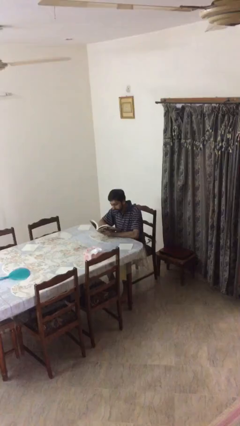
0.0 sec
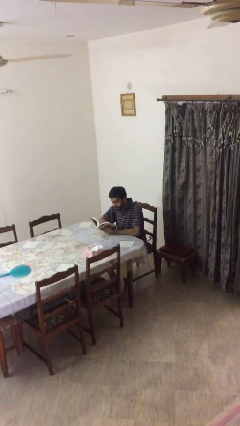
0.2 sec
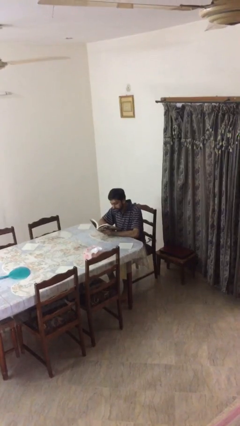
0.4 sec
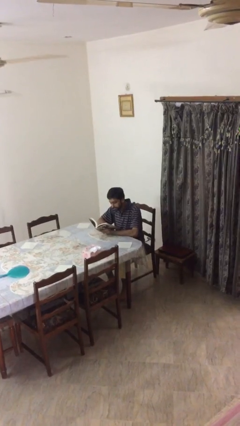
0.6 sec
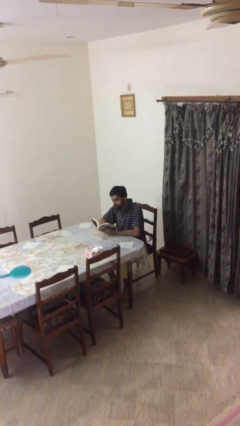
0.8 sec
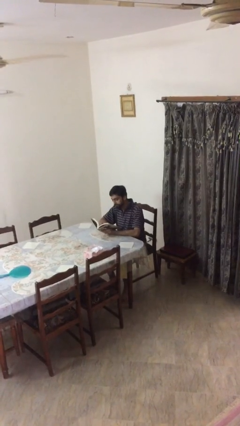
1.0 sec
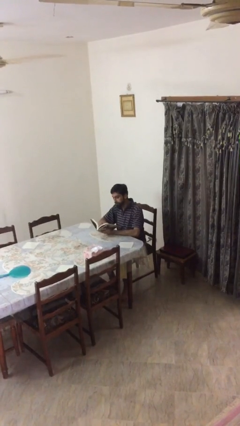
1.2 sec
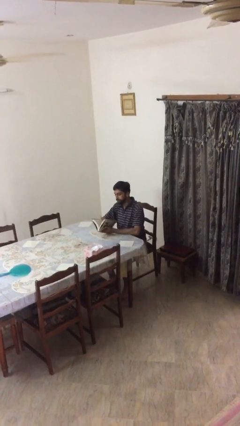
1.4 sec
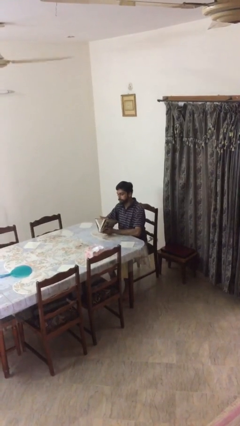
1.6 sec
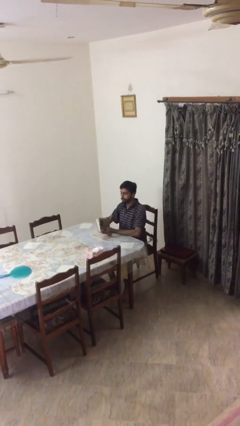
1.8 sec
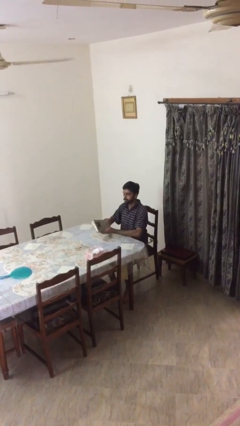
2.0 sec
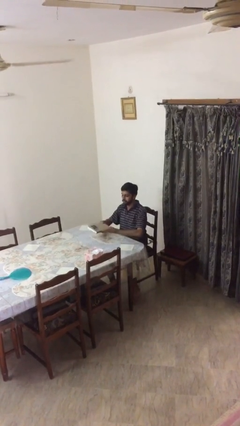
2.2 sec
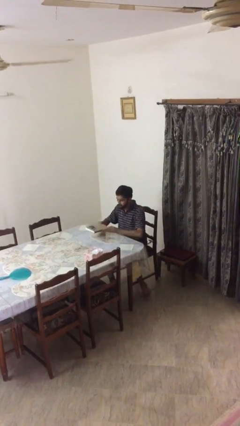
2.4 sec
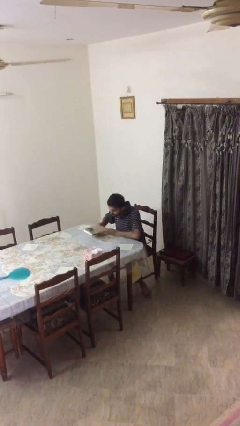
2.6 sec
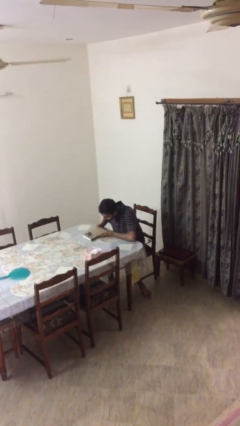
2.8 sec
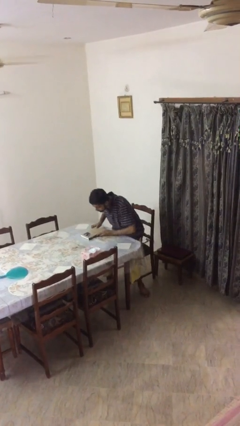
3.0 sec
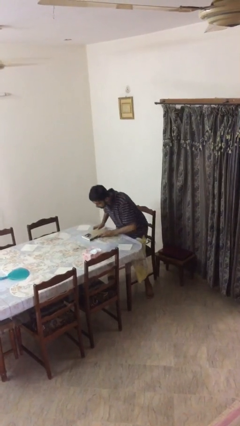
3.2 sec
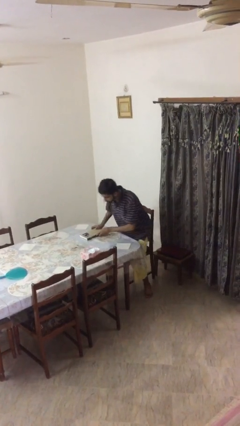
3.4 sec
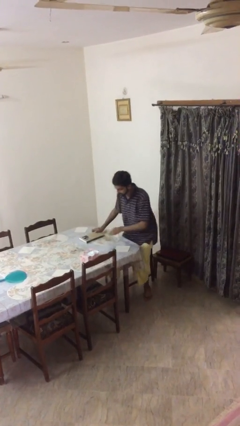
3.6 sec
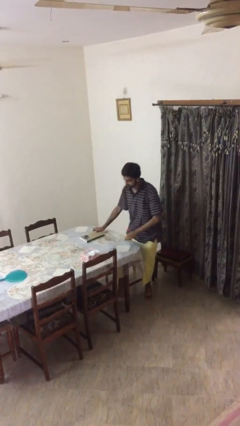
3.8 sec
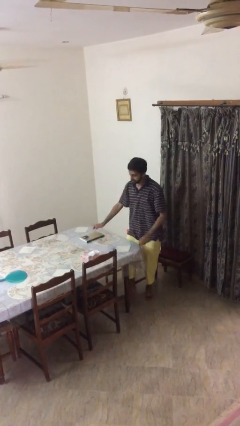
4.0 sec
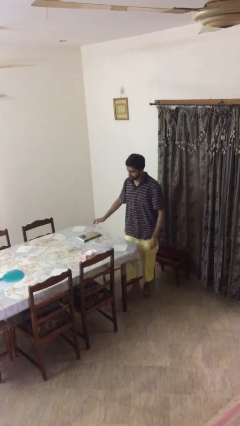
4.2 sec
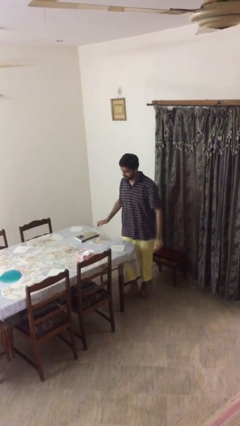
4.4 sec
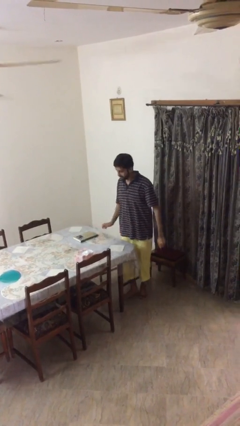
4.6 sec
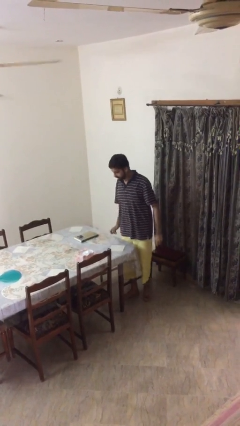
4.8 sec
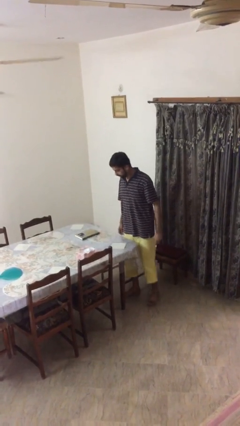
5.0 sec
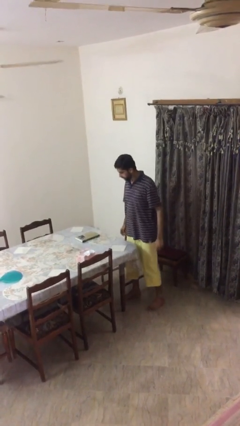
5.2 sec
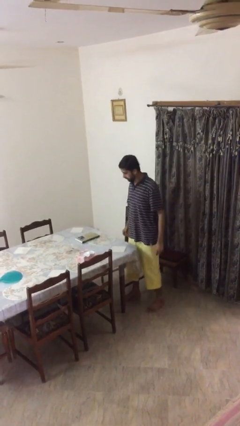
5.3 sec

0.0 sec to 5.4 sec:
person stands up

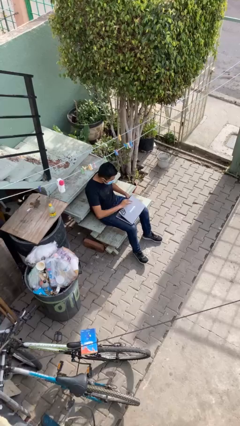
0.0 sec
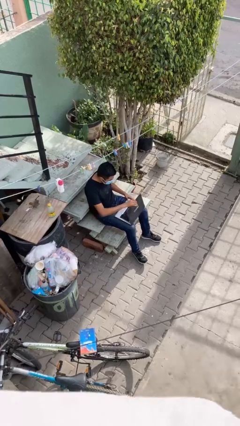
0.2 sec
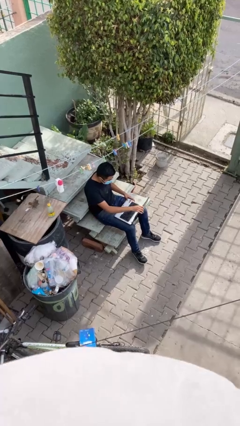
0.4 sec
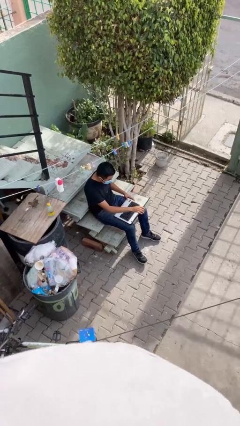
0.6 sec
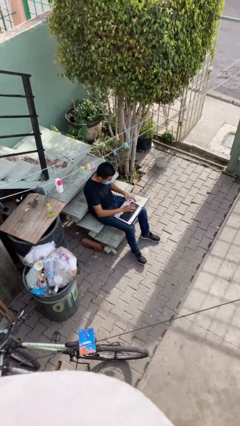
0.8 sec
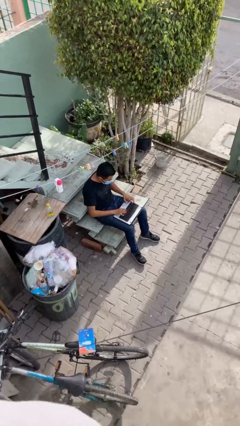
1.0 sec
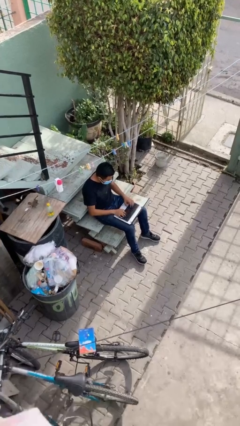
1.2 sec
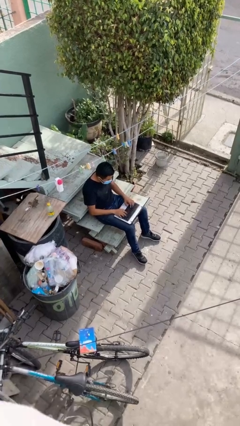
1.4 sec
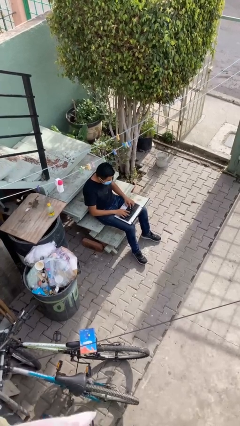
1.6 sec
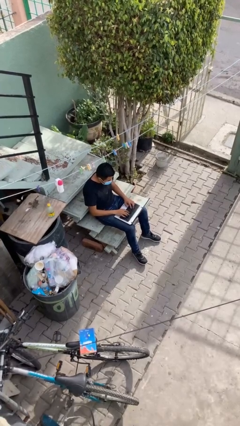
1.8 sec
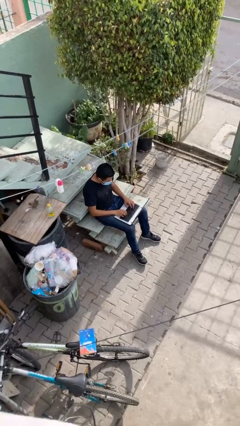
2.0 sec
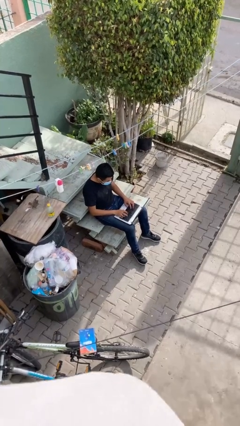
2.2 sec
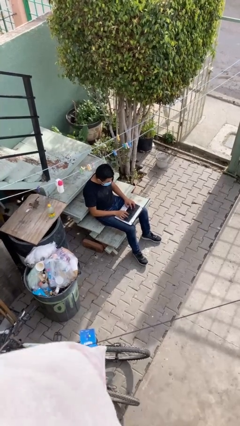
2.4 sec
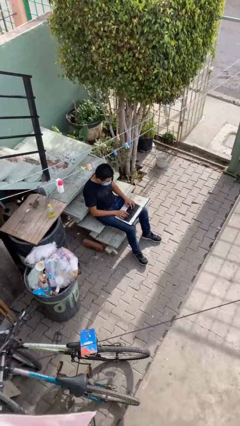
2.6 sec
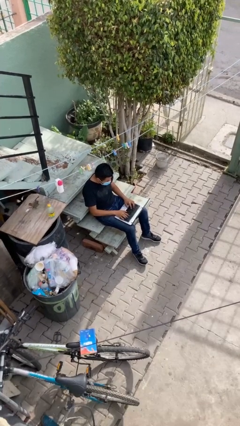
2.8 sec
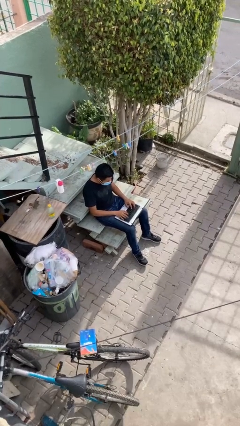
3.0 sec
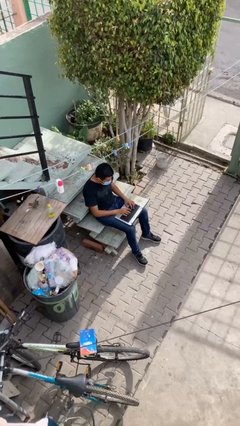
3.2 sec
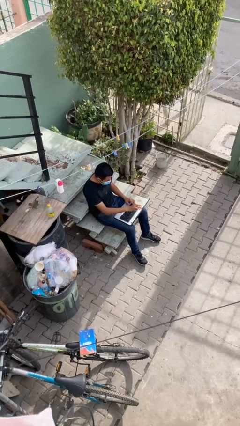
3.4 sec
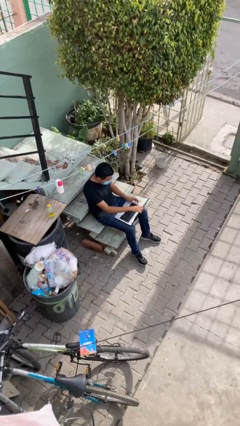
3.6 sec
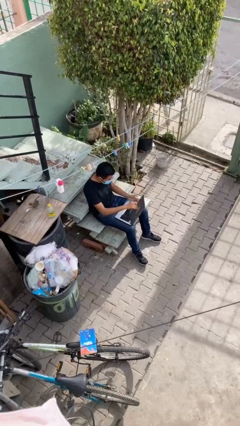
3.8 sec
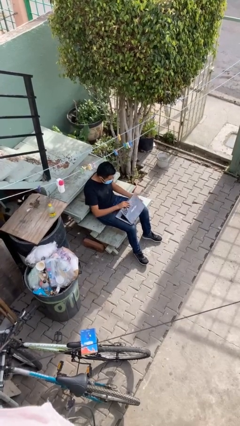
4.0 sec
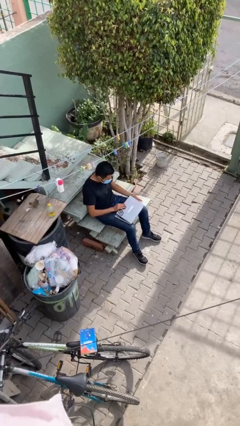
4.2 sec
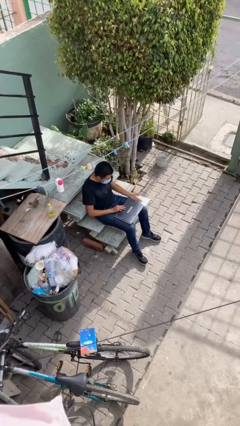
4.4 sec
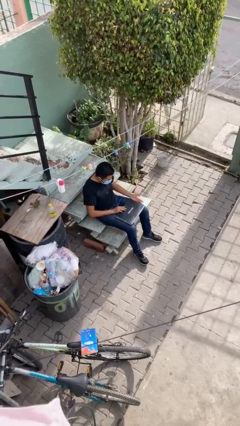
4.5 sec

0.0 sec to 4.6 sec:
person interacts with laptop

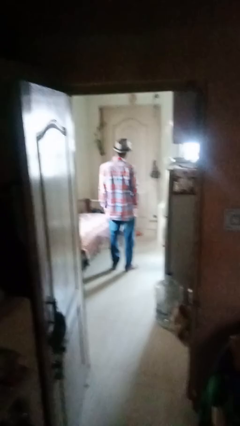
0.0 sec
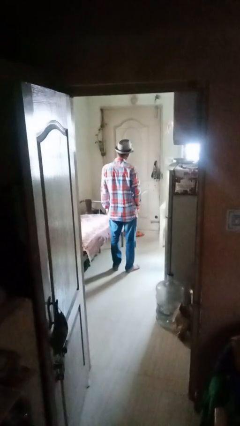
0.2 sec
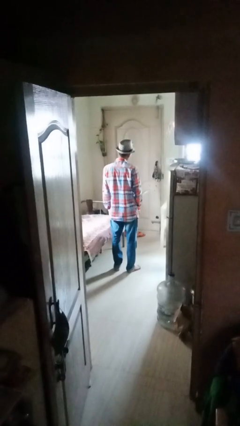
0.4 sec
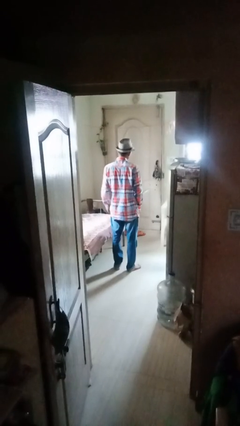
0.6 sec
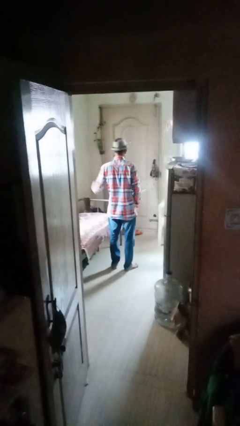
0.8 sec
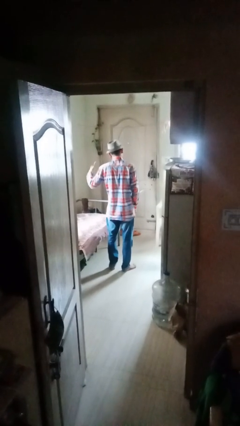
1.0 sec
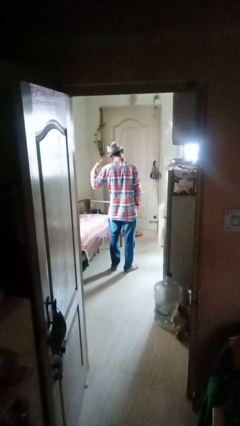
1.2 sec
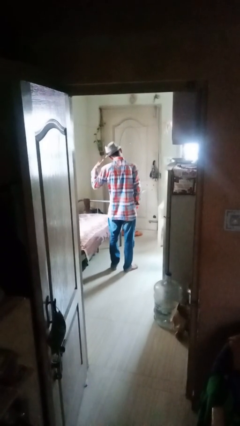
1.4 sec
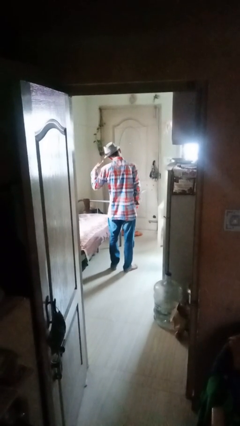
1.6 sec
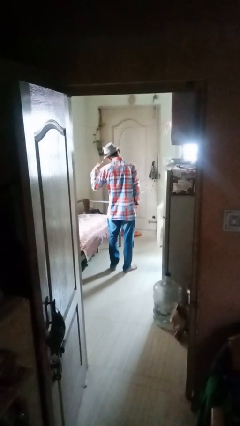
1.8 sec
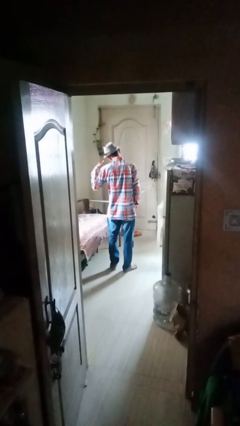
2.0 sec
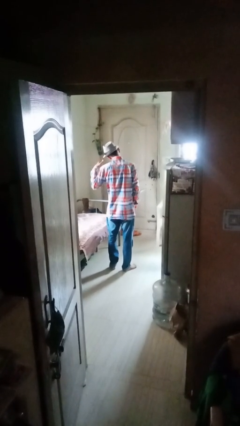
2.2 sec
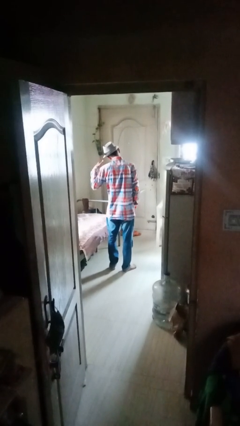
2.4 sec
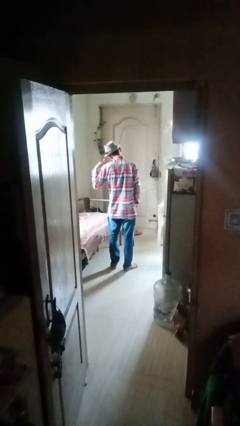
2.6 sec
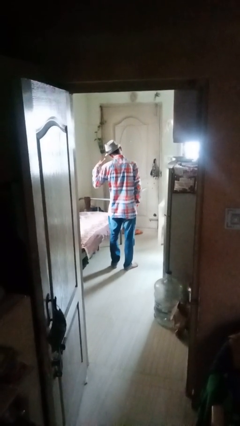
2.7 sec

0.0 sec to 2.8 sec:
person gestures call me

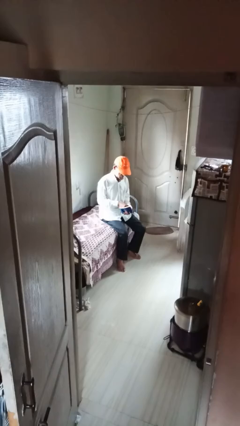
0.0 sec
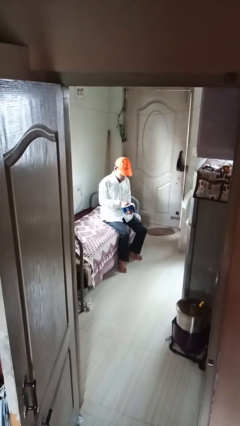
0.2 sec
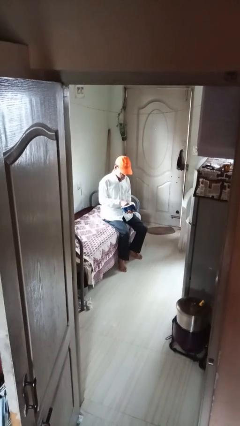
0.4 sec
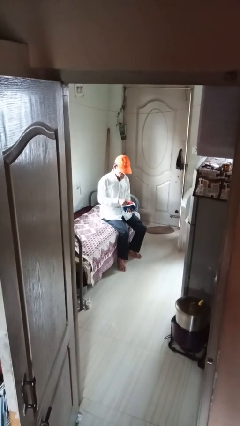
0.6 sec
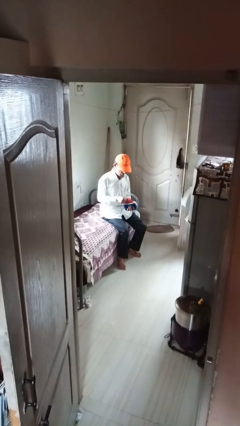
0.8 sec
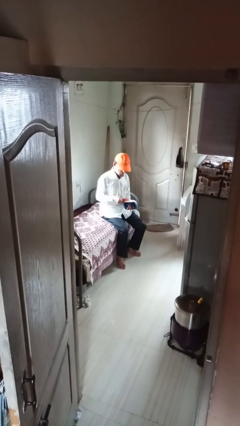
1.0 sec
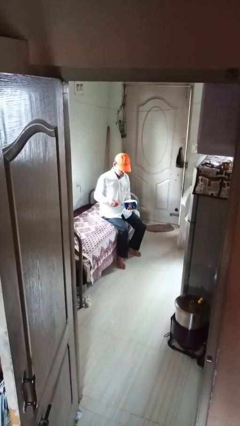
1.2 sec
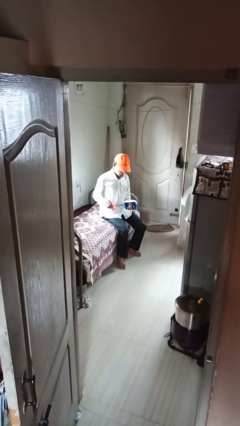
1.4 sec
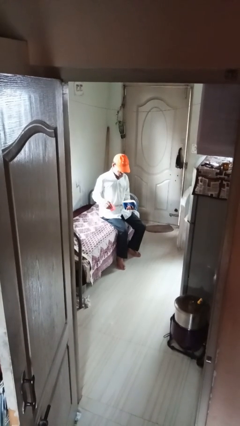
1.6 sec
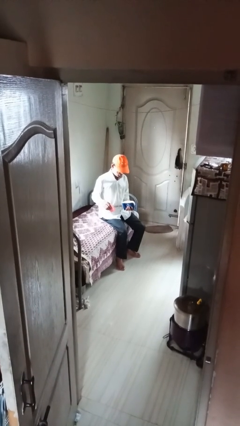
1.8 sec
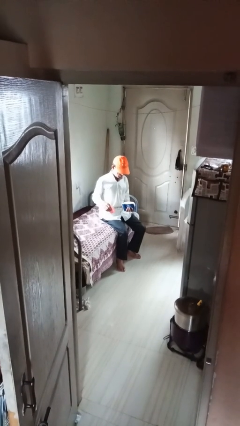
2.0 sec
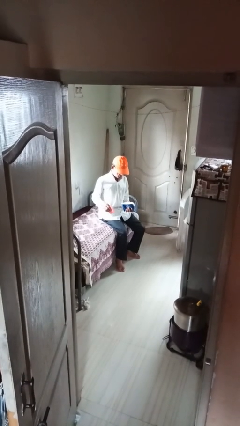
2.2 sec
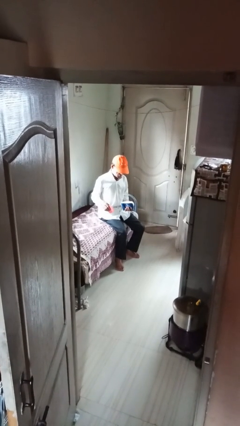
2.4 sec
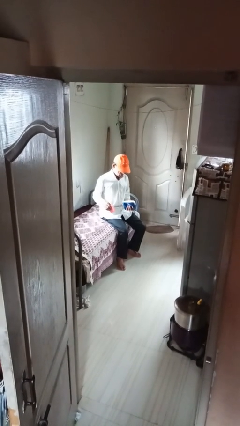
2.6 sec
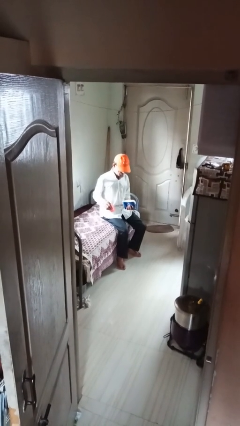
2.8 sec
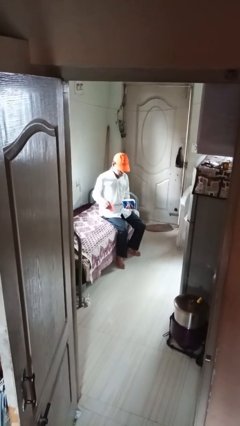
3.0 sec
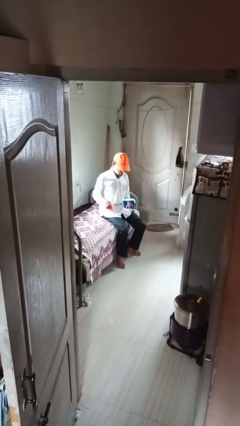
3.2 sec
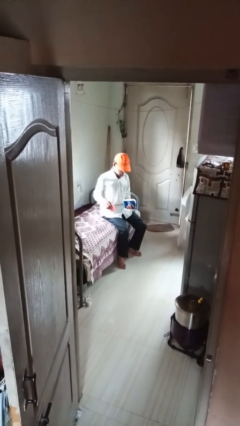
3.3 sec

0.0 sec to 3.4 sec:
person takes object from purse

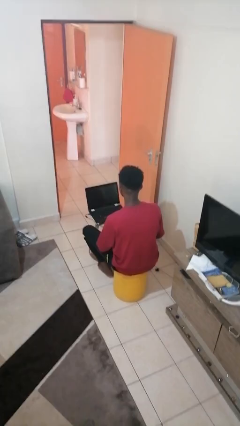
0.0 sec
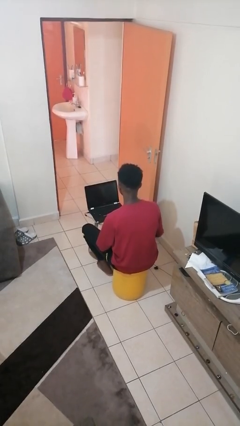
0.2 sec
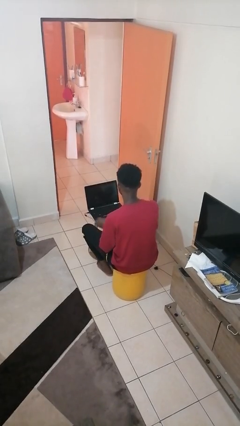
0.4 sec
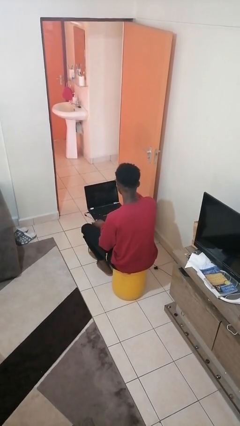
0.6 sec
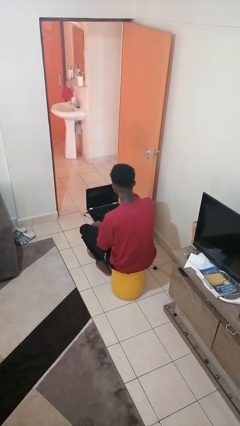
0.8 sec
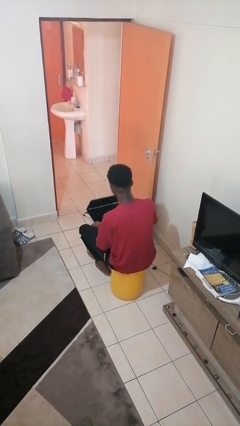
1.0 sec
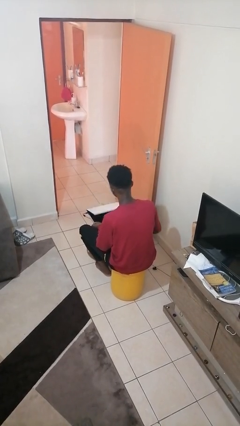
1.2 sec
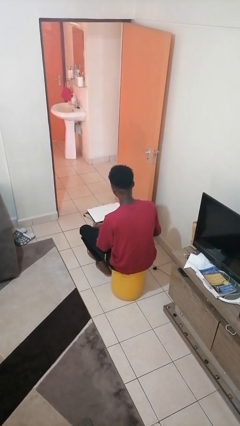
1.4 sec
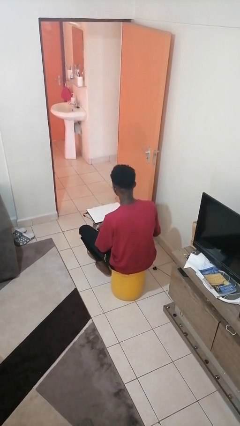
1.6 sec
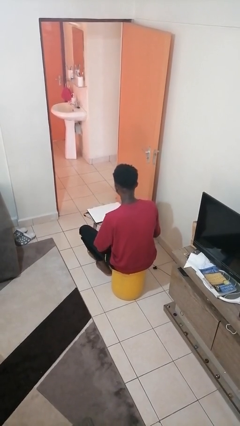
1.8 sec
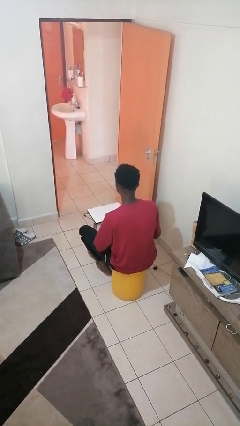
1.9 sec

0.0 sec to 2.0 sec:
person closes laptop
